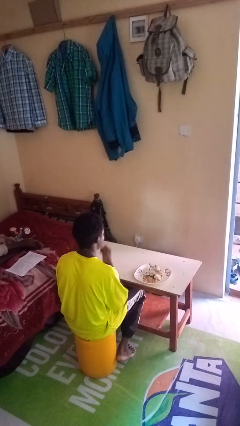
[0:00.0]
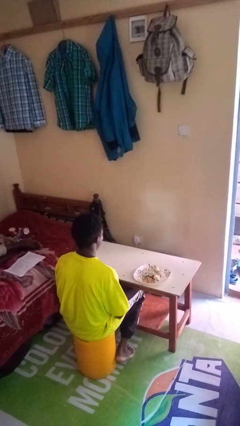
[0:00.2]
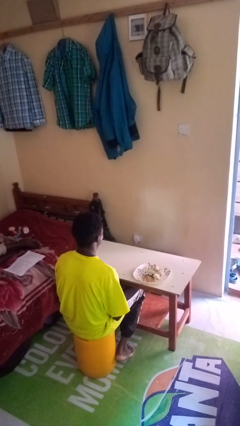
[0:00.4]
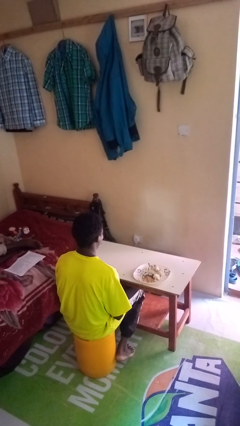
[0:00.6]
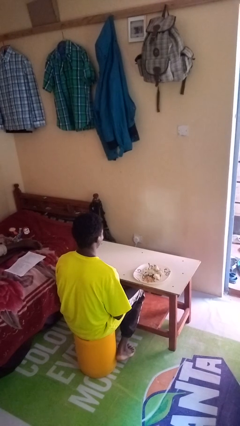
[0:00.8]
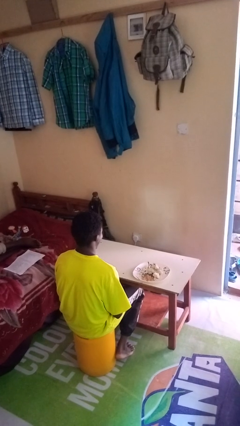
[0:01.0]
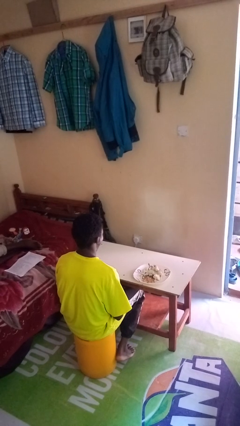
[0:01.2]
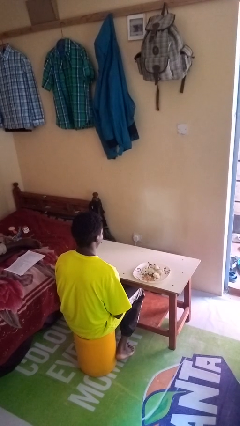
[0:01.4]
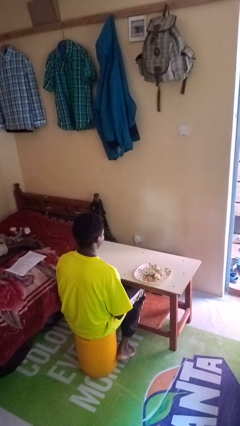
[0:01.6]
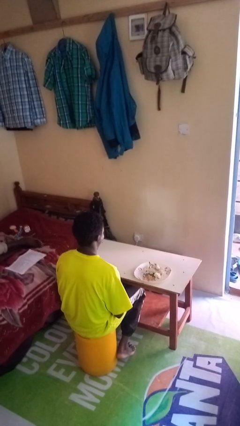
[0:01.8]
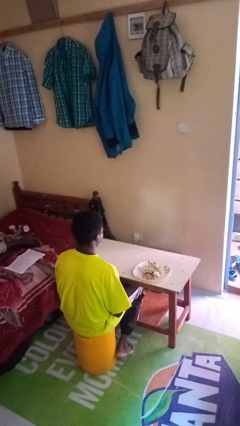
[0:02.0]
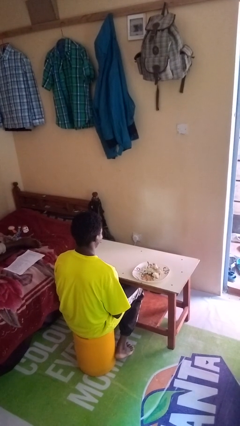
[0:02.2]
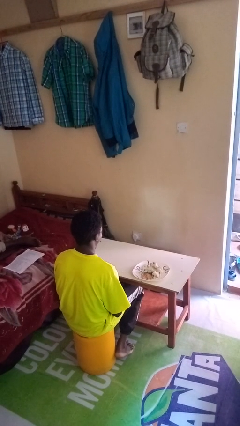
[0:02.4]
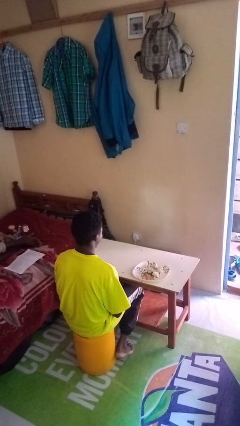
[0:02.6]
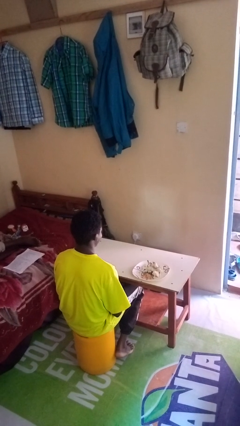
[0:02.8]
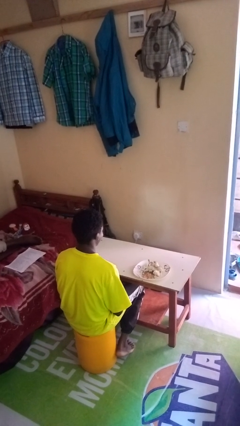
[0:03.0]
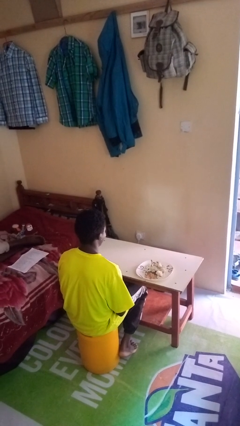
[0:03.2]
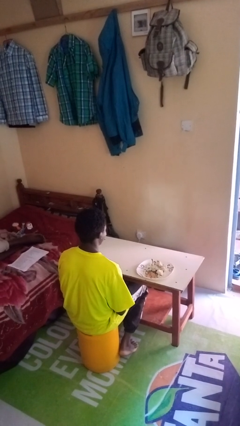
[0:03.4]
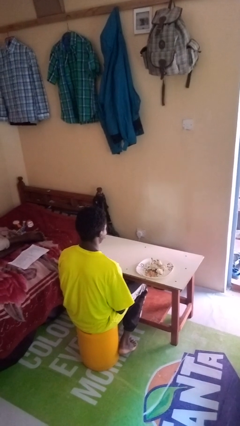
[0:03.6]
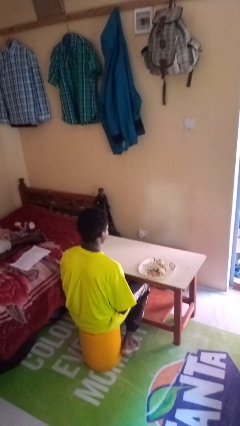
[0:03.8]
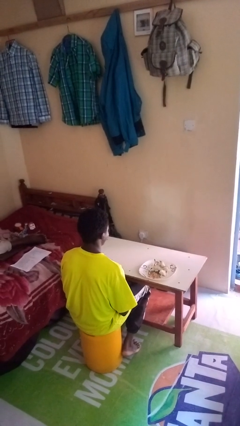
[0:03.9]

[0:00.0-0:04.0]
person eats with hands

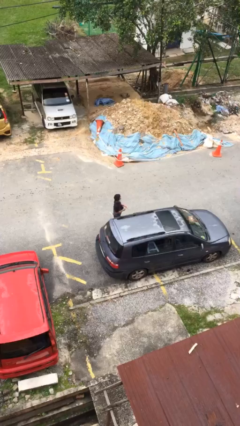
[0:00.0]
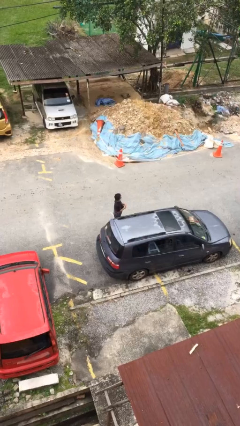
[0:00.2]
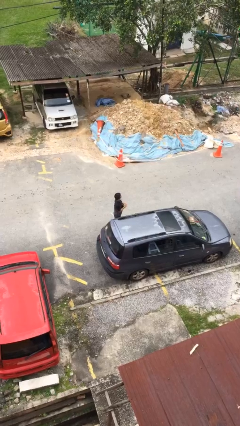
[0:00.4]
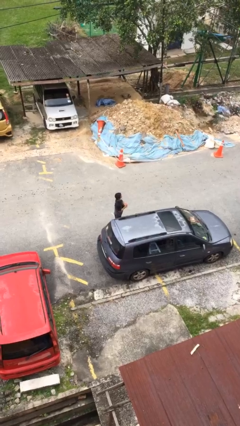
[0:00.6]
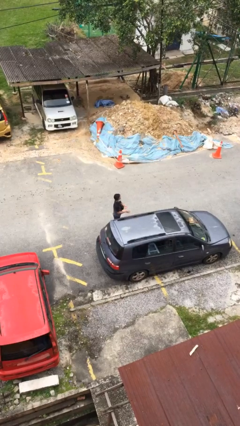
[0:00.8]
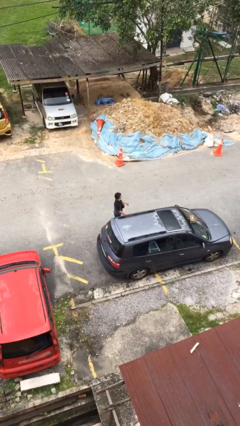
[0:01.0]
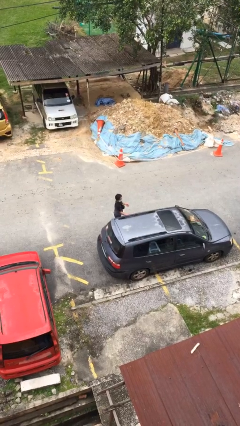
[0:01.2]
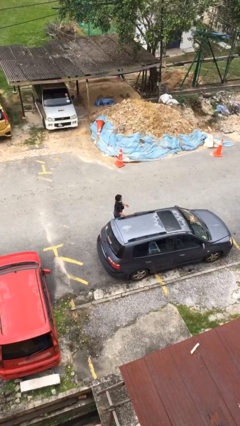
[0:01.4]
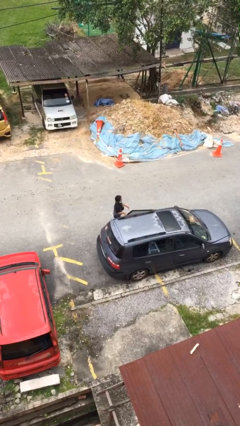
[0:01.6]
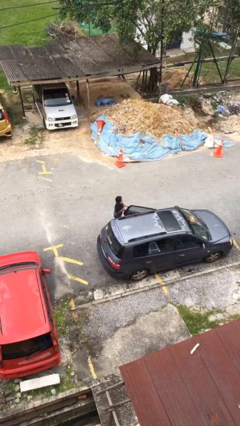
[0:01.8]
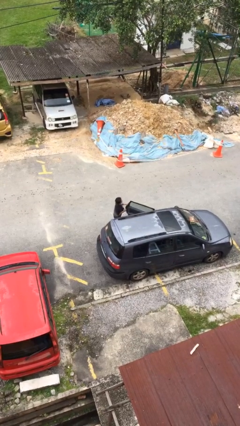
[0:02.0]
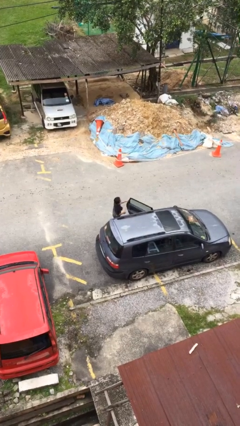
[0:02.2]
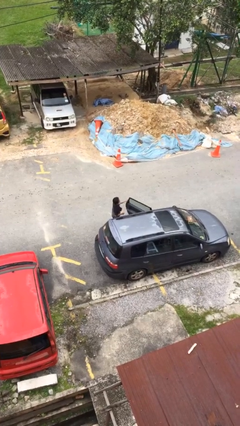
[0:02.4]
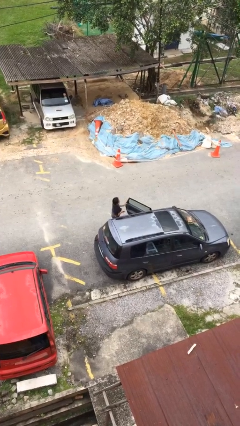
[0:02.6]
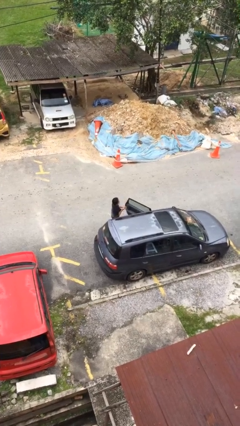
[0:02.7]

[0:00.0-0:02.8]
person opens car door

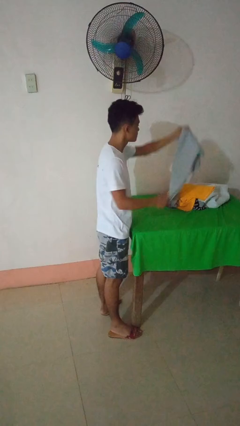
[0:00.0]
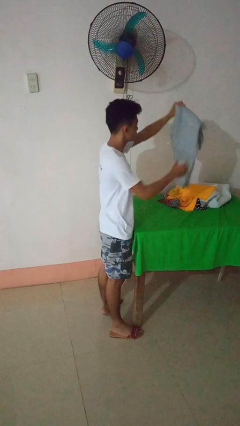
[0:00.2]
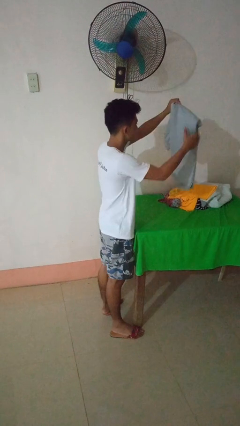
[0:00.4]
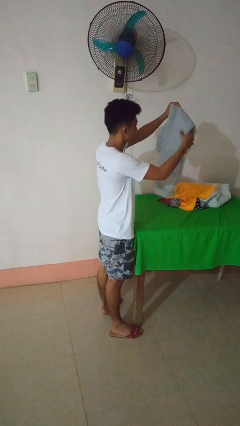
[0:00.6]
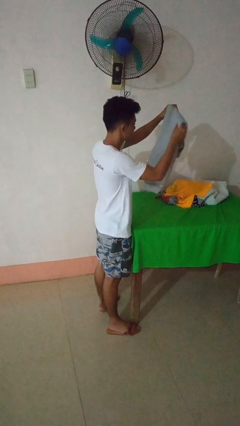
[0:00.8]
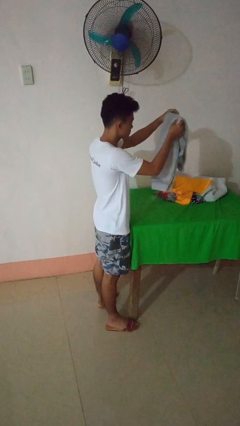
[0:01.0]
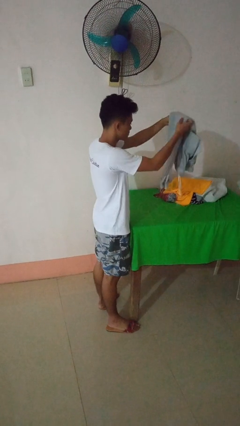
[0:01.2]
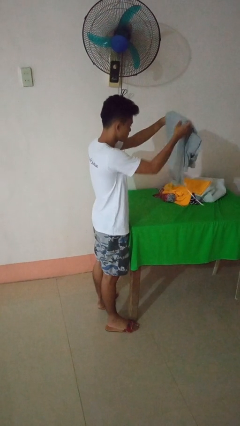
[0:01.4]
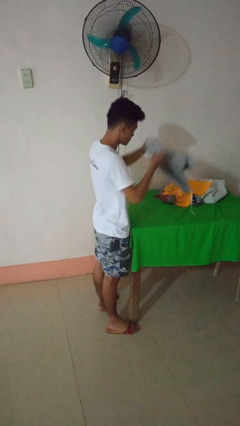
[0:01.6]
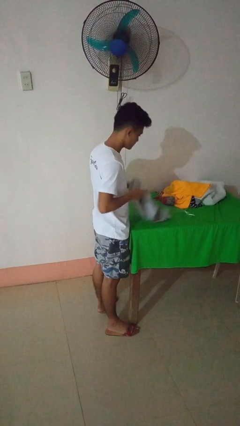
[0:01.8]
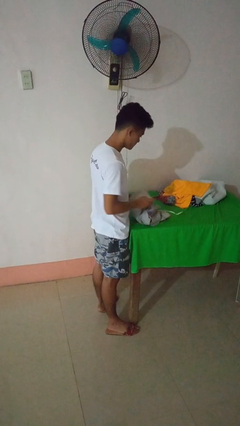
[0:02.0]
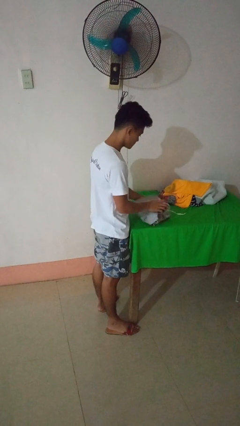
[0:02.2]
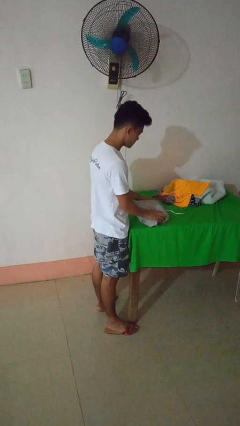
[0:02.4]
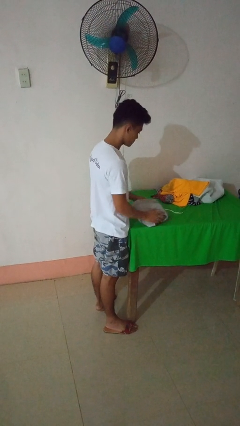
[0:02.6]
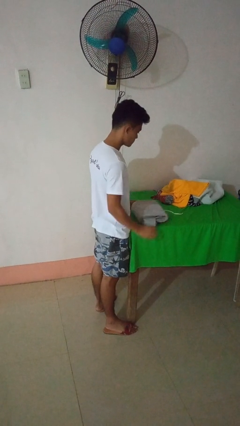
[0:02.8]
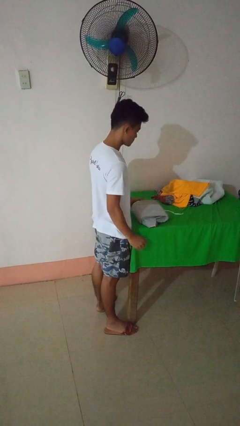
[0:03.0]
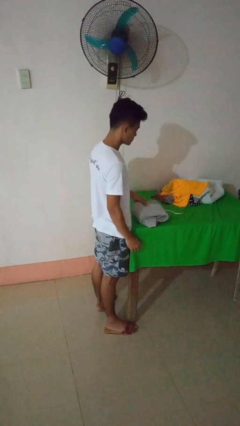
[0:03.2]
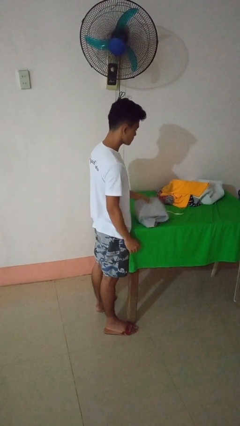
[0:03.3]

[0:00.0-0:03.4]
person folds pants

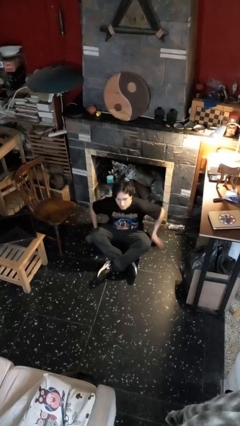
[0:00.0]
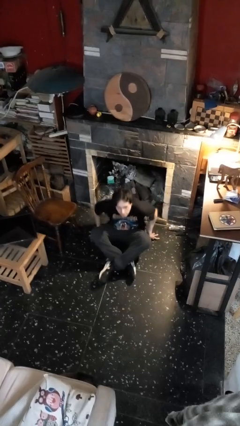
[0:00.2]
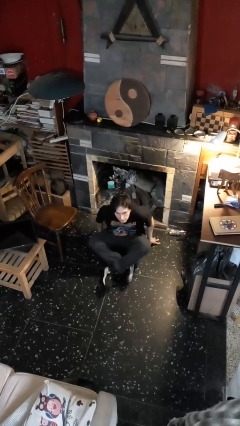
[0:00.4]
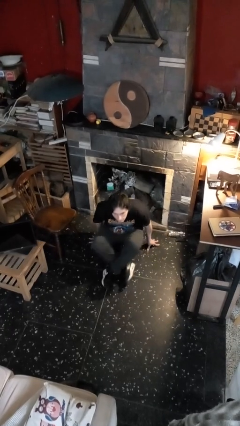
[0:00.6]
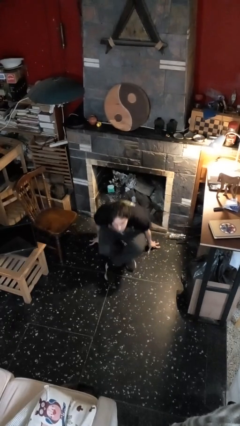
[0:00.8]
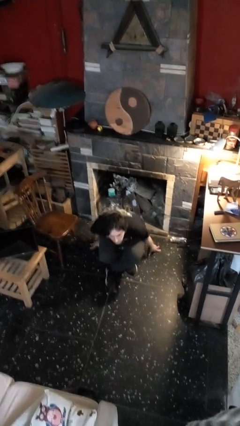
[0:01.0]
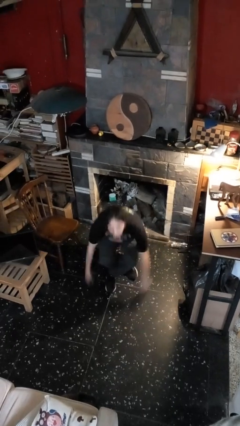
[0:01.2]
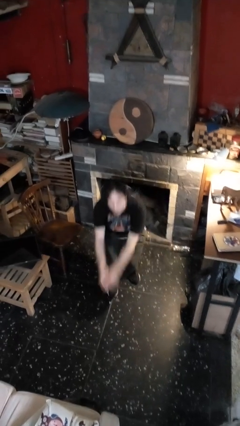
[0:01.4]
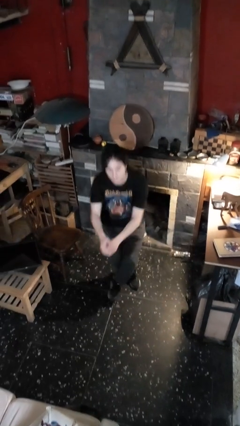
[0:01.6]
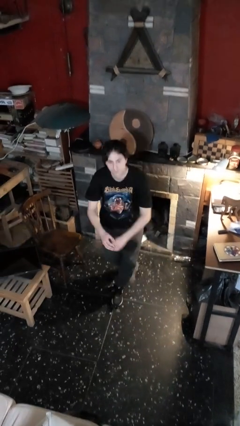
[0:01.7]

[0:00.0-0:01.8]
person stands up from floor

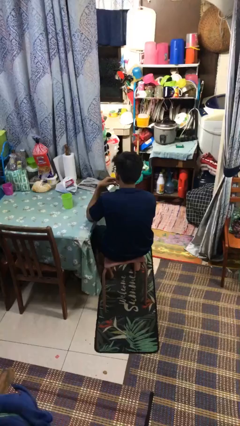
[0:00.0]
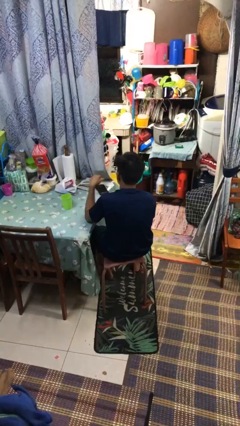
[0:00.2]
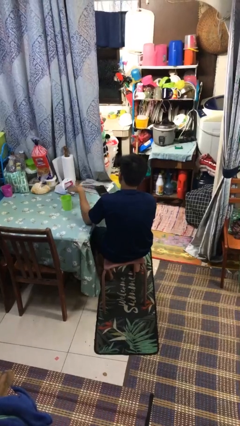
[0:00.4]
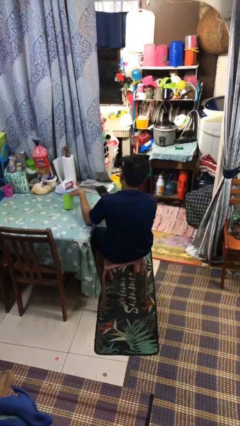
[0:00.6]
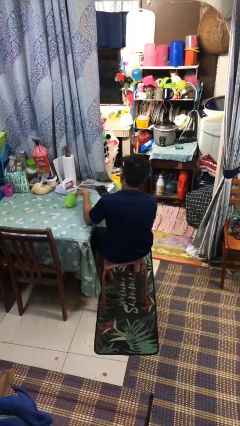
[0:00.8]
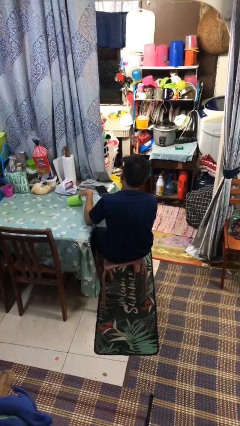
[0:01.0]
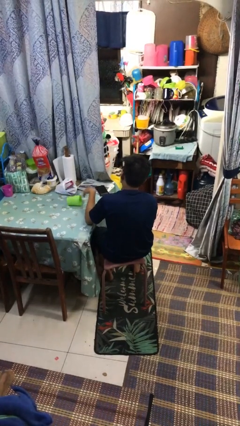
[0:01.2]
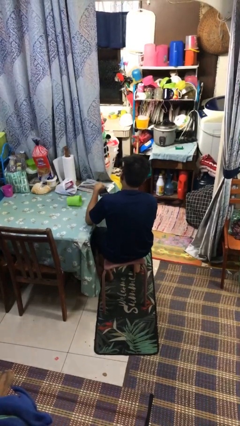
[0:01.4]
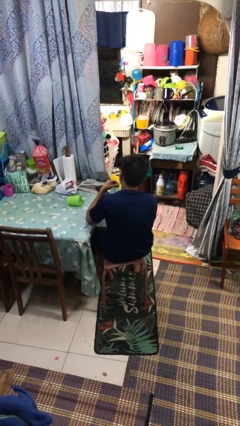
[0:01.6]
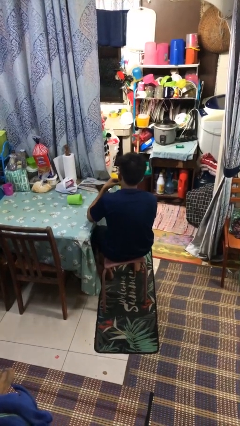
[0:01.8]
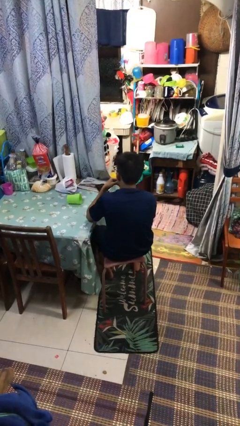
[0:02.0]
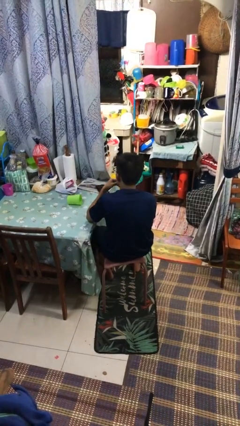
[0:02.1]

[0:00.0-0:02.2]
person knocks over glass

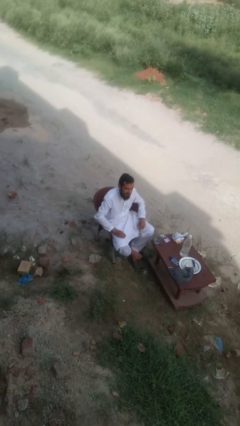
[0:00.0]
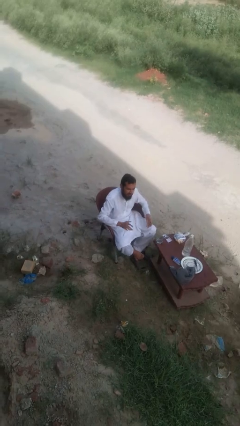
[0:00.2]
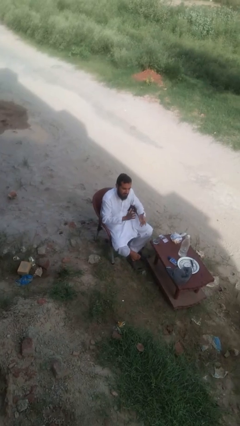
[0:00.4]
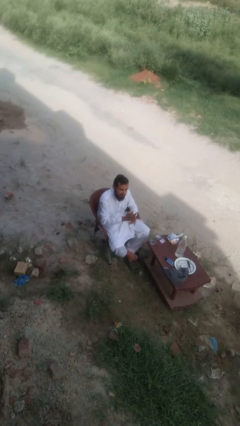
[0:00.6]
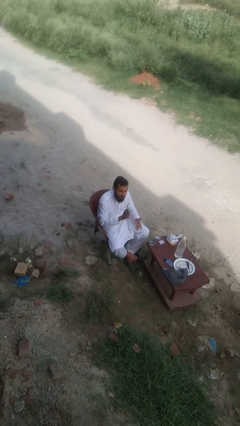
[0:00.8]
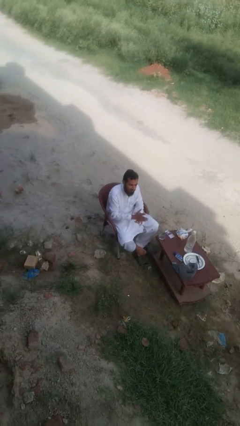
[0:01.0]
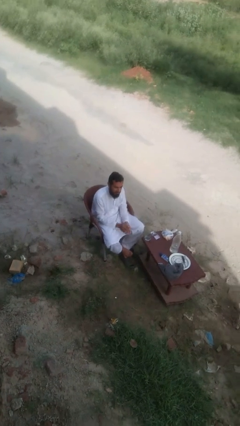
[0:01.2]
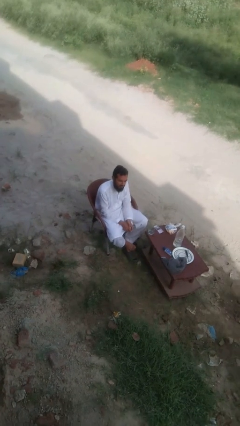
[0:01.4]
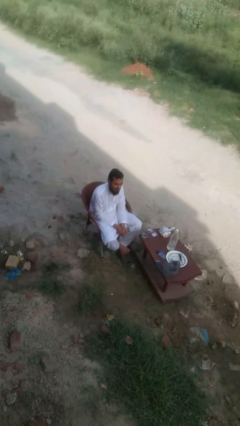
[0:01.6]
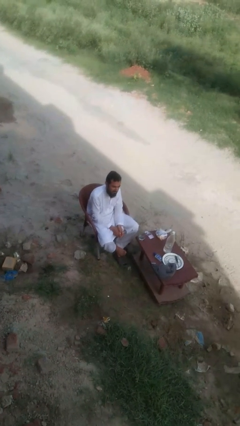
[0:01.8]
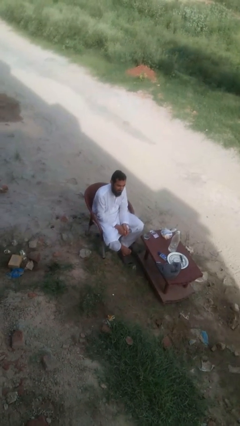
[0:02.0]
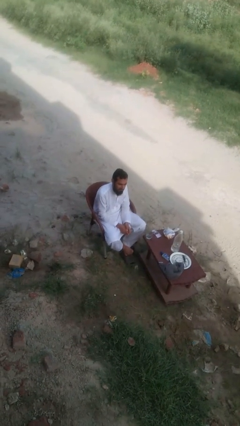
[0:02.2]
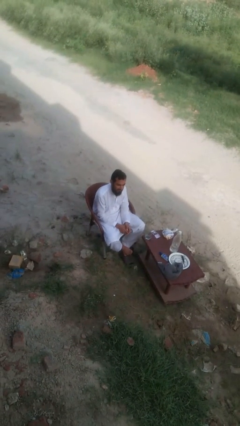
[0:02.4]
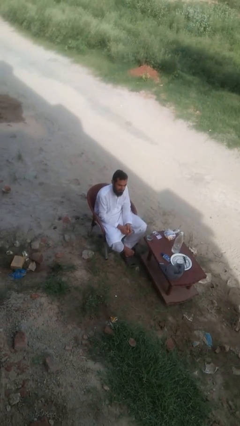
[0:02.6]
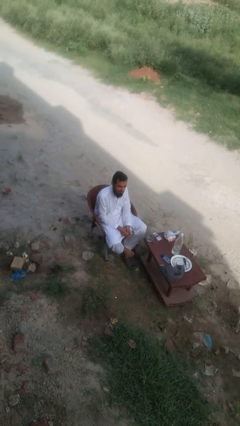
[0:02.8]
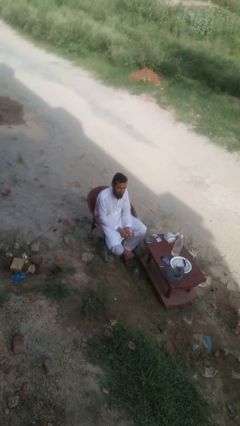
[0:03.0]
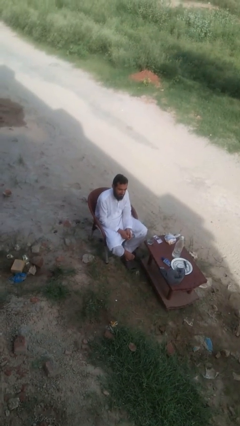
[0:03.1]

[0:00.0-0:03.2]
person claps hands

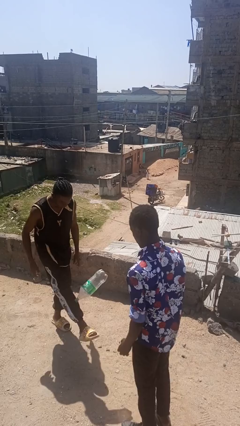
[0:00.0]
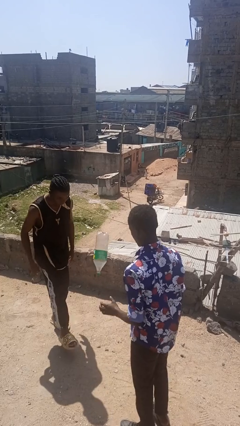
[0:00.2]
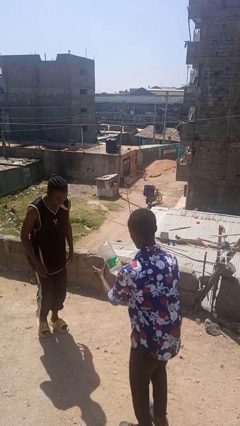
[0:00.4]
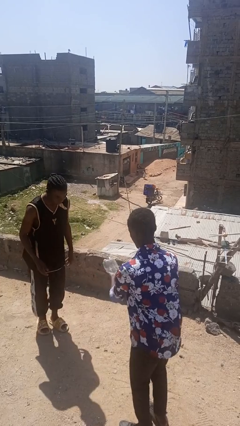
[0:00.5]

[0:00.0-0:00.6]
person kicks object to person
